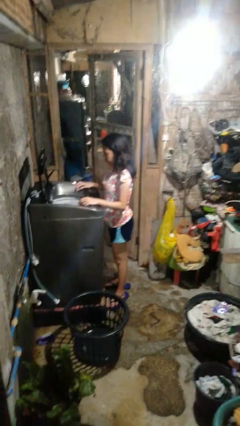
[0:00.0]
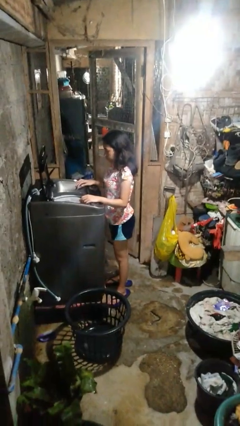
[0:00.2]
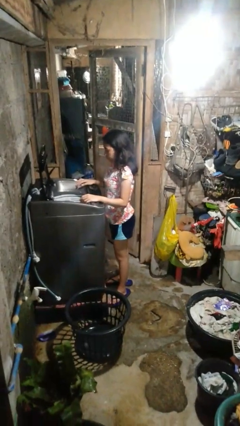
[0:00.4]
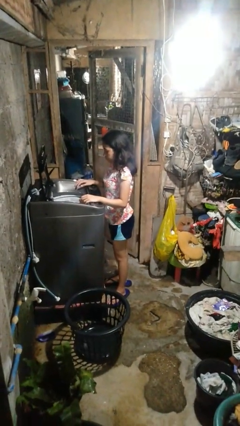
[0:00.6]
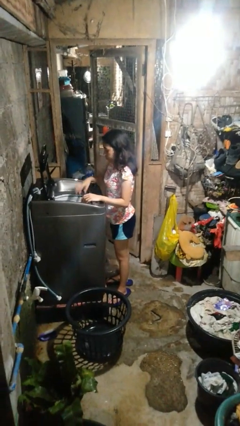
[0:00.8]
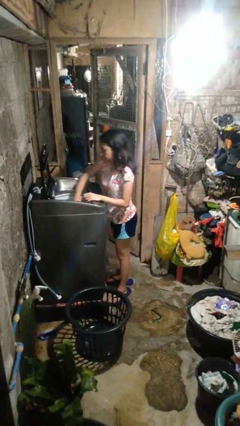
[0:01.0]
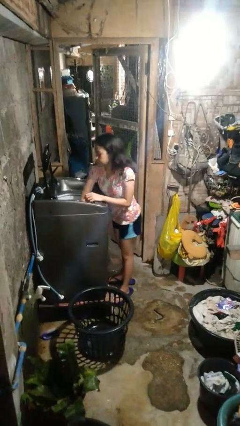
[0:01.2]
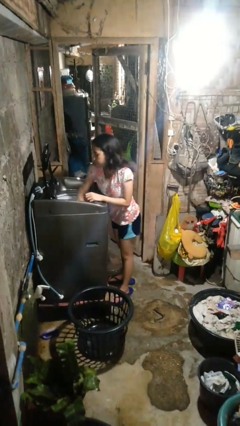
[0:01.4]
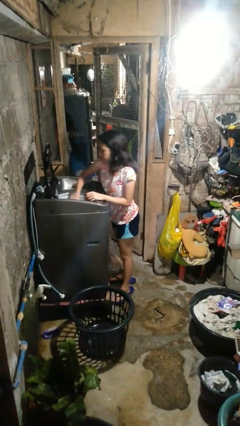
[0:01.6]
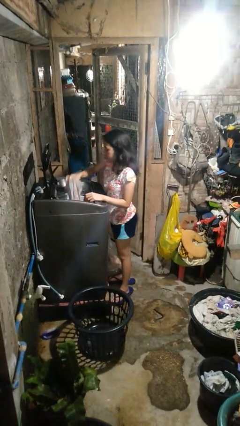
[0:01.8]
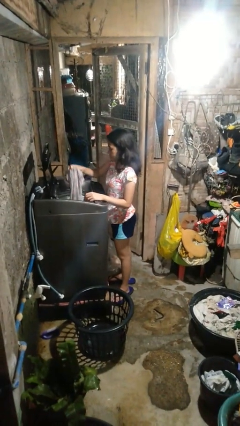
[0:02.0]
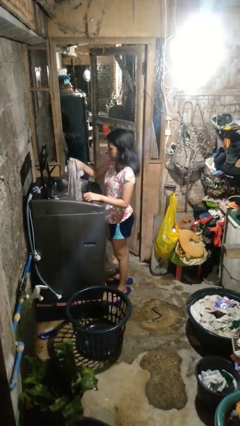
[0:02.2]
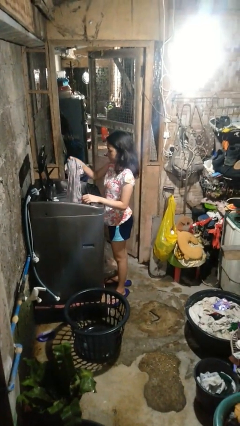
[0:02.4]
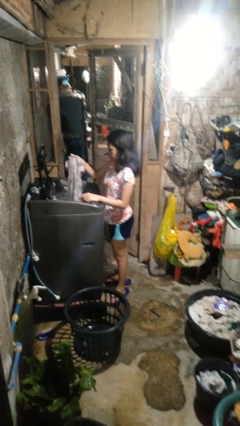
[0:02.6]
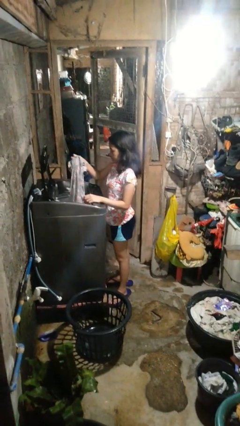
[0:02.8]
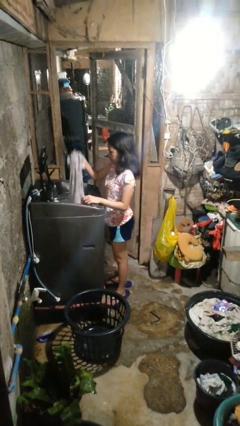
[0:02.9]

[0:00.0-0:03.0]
person unloads clotheswasher

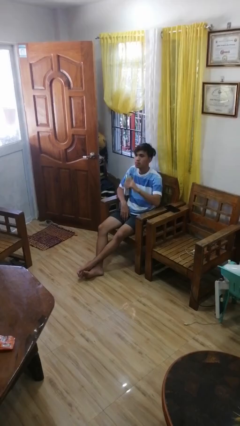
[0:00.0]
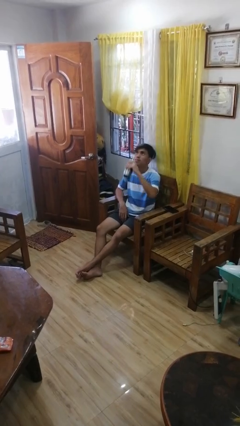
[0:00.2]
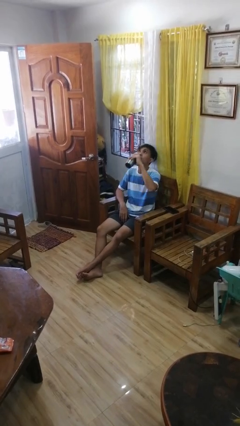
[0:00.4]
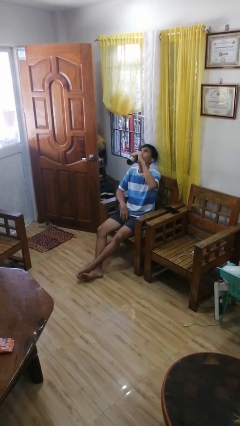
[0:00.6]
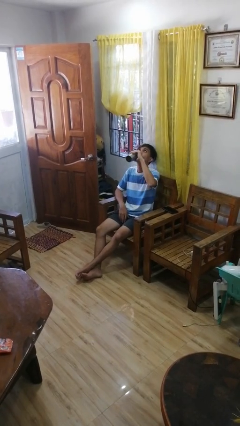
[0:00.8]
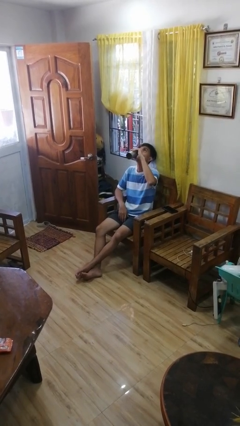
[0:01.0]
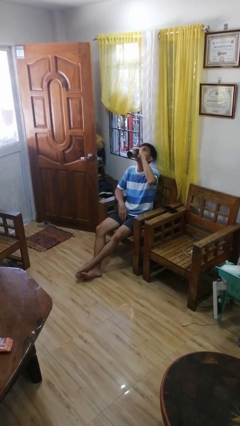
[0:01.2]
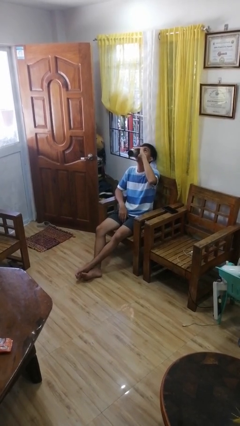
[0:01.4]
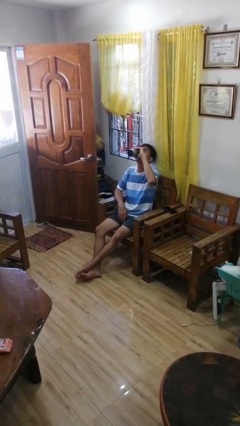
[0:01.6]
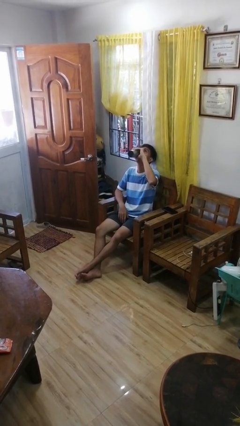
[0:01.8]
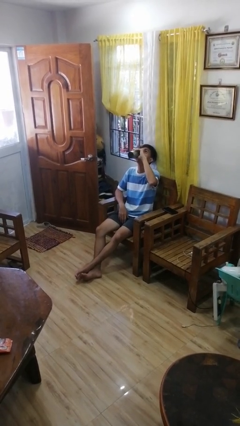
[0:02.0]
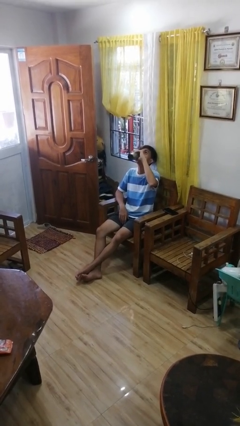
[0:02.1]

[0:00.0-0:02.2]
person drinks from bottle

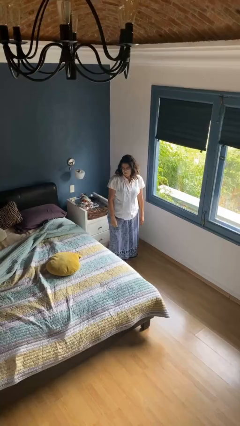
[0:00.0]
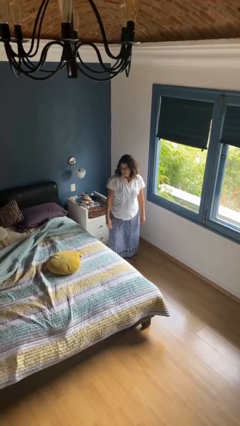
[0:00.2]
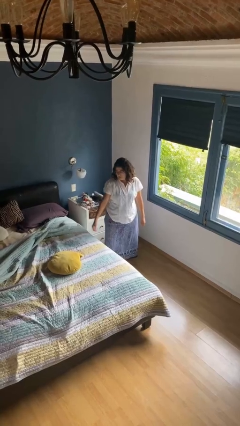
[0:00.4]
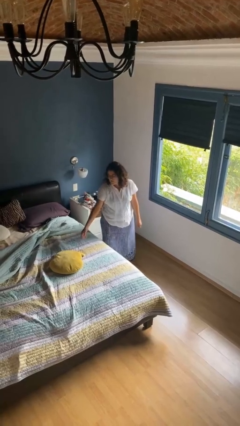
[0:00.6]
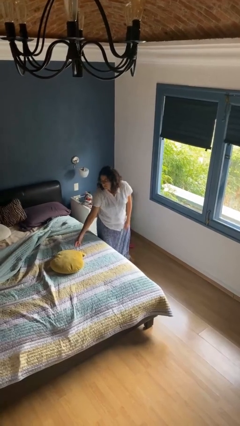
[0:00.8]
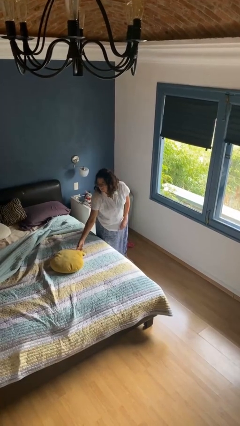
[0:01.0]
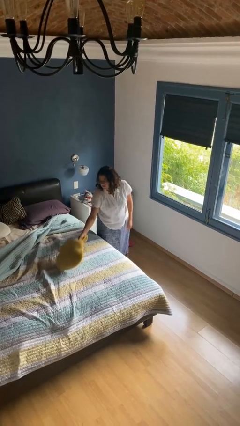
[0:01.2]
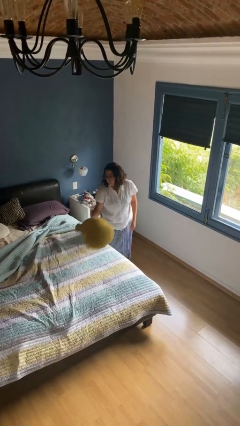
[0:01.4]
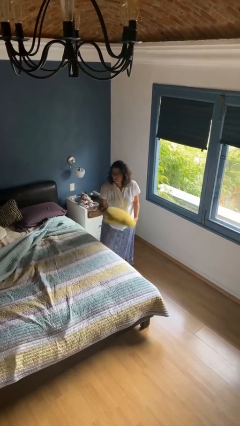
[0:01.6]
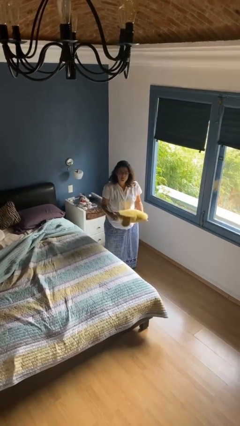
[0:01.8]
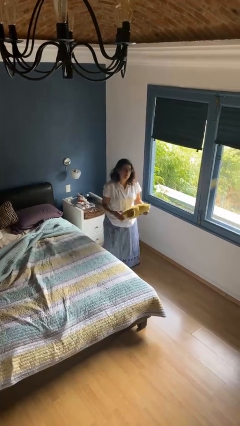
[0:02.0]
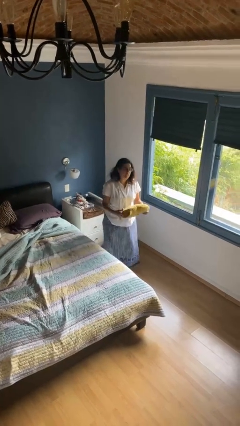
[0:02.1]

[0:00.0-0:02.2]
person picks up object from bed

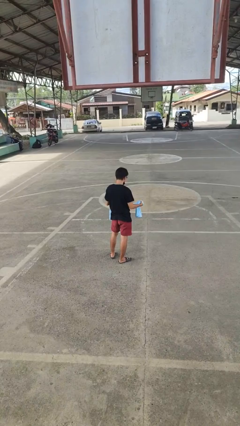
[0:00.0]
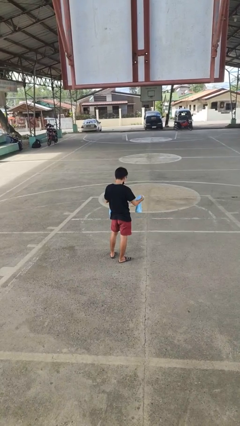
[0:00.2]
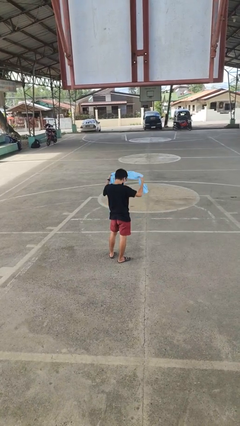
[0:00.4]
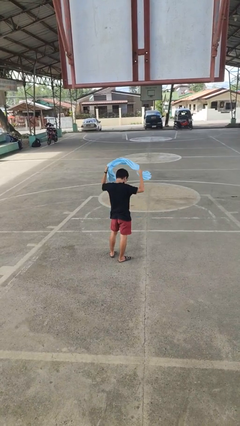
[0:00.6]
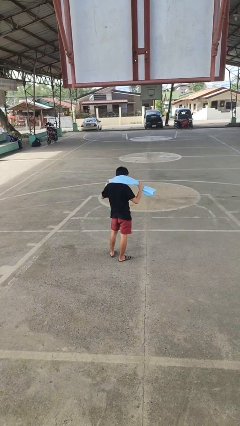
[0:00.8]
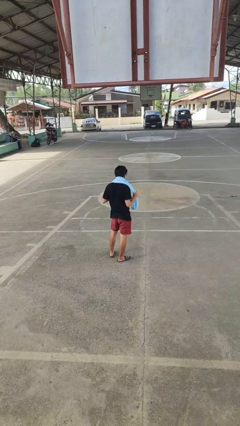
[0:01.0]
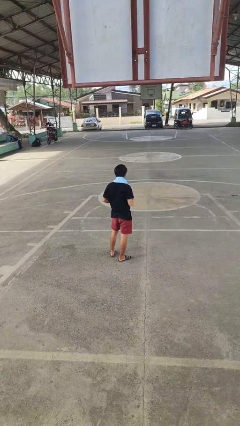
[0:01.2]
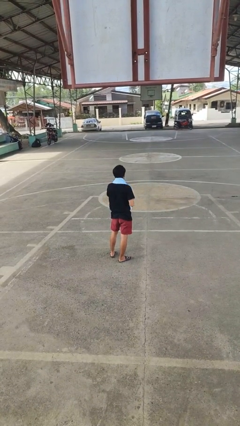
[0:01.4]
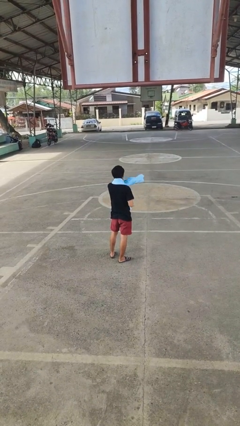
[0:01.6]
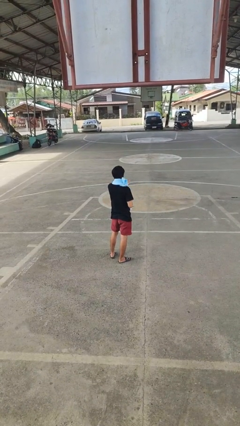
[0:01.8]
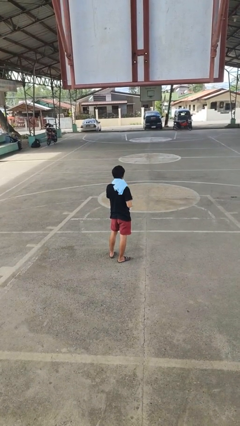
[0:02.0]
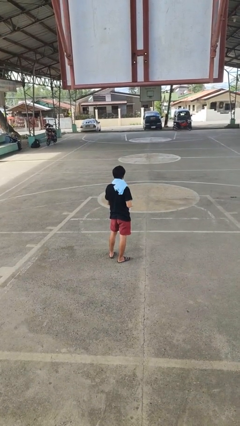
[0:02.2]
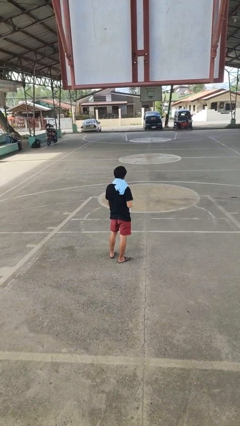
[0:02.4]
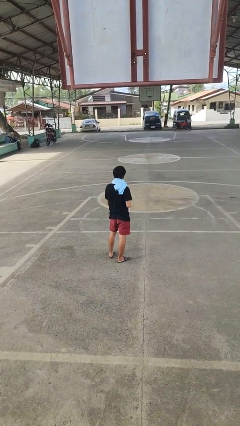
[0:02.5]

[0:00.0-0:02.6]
person puts on scarf

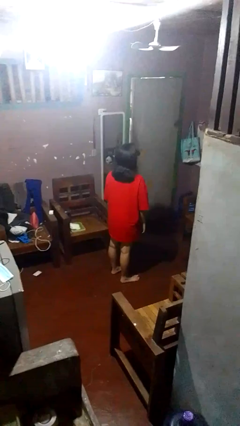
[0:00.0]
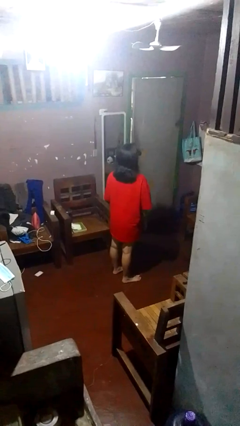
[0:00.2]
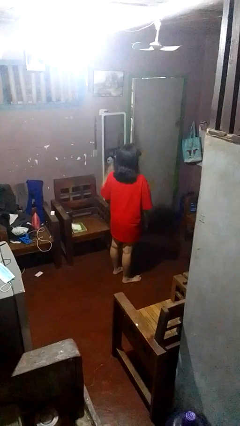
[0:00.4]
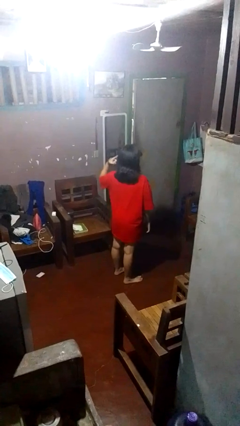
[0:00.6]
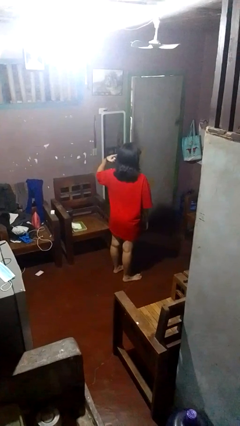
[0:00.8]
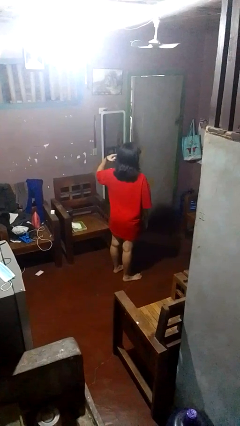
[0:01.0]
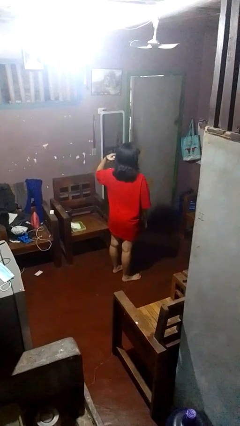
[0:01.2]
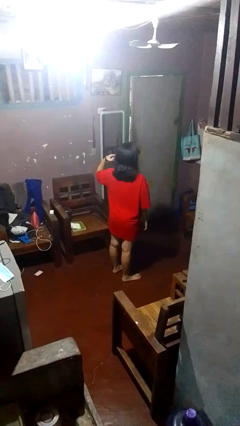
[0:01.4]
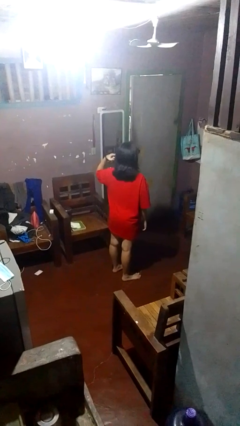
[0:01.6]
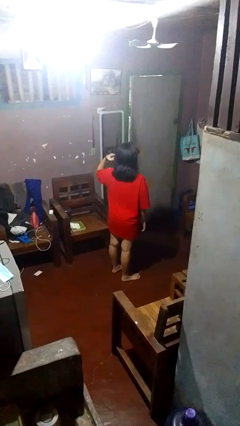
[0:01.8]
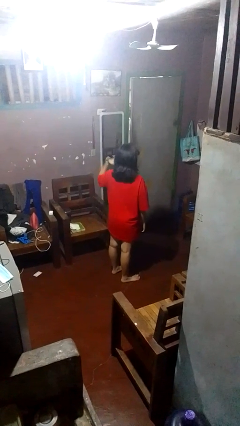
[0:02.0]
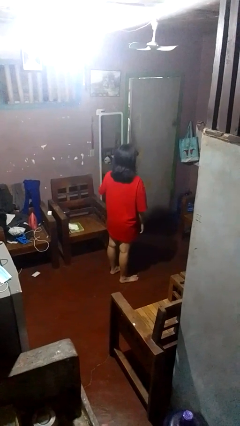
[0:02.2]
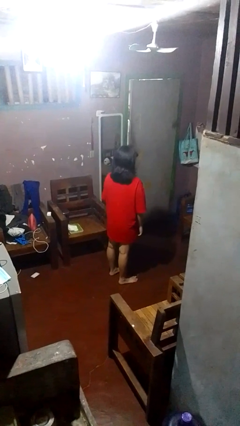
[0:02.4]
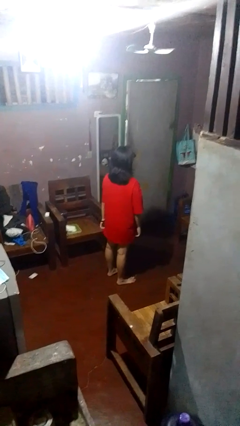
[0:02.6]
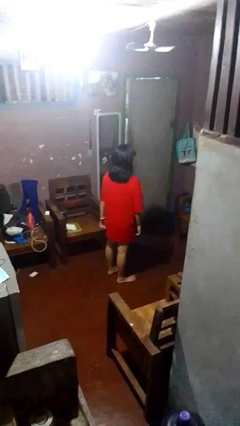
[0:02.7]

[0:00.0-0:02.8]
person gestures listen closely

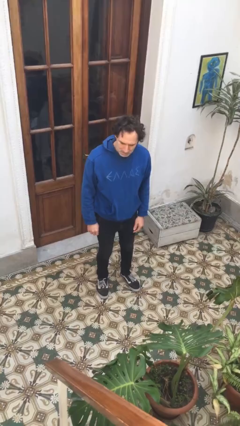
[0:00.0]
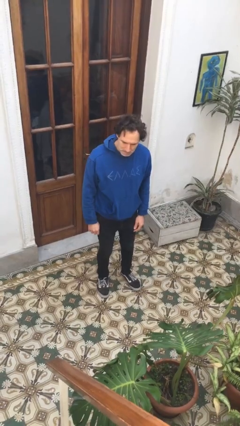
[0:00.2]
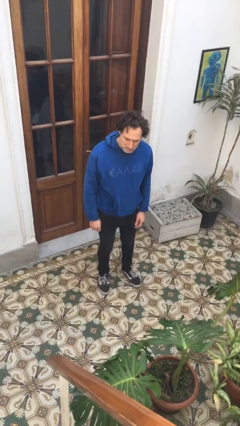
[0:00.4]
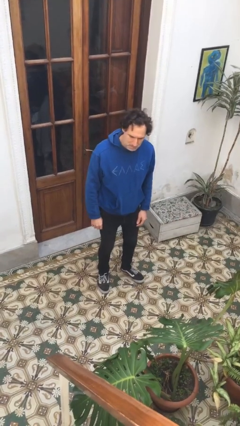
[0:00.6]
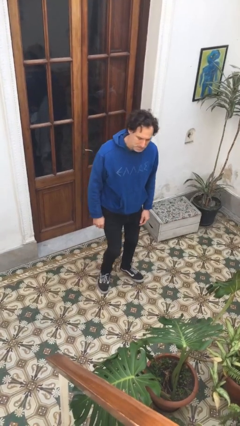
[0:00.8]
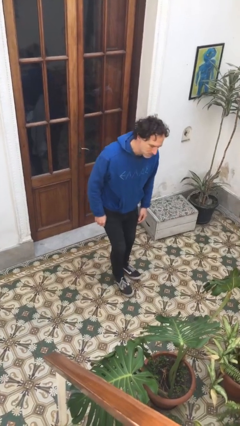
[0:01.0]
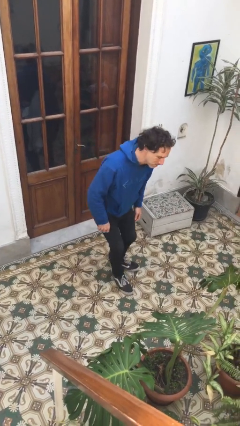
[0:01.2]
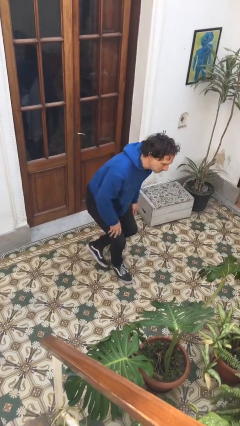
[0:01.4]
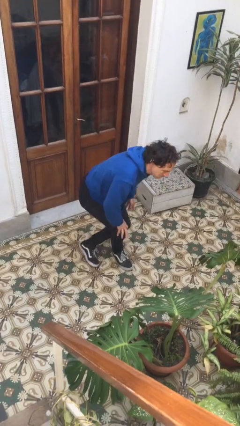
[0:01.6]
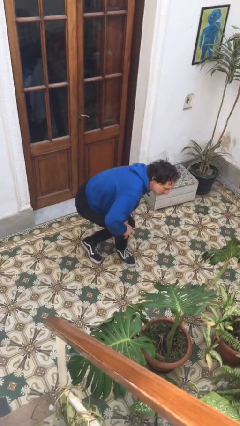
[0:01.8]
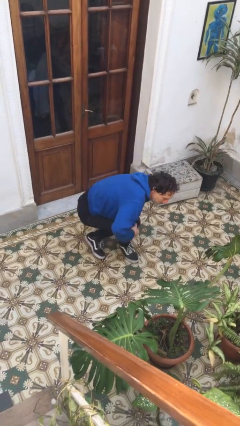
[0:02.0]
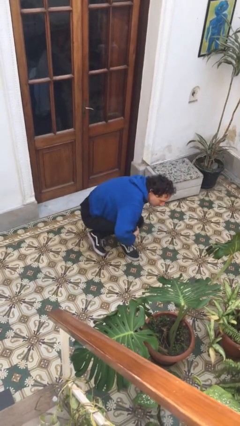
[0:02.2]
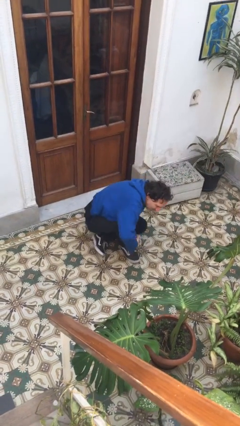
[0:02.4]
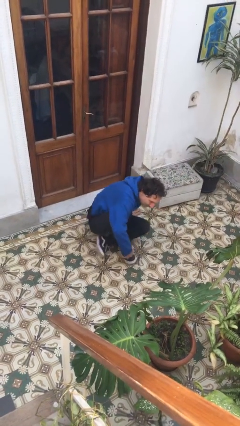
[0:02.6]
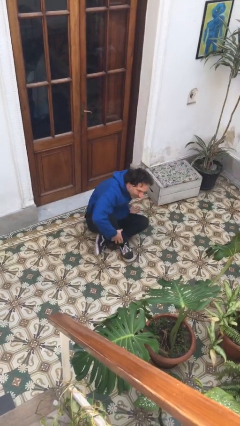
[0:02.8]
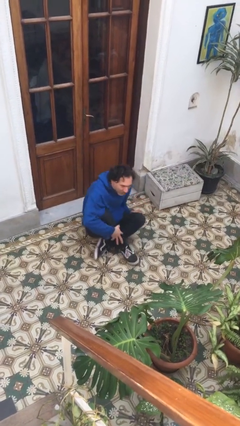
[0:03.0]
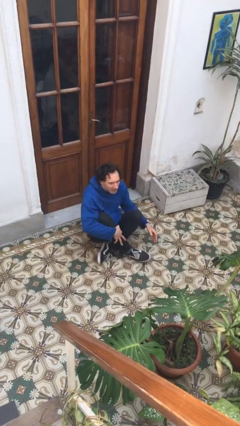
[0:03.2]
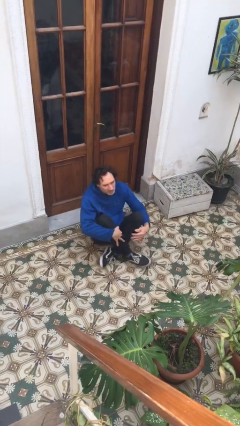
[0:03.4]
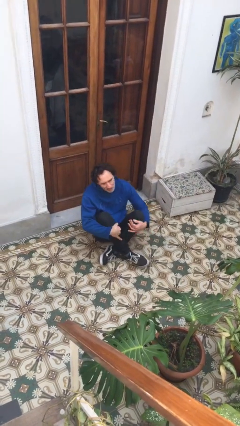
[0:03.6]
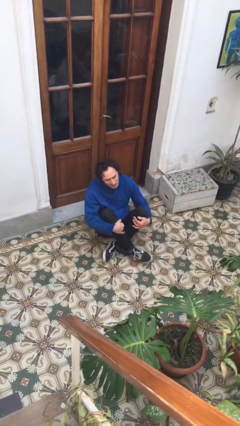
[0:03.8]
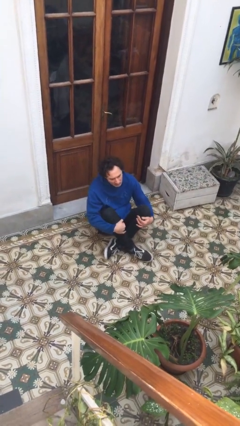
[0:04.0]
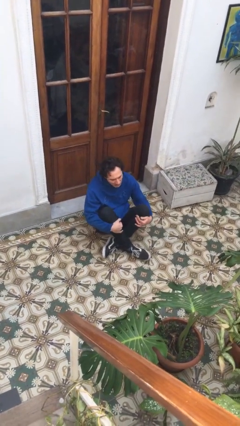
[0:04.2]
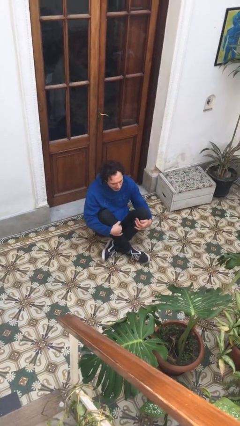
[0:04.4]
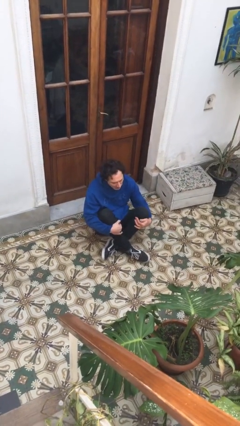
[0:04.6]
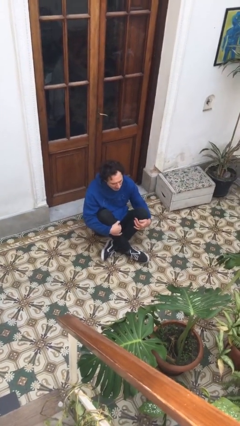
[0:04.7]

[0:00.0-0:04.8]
person sits crisscross
